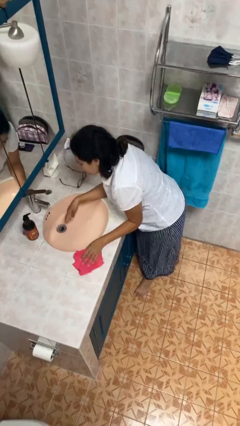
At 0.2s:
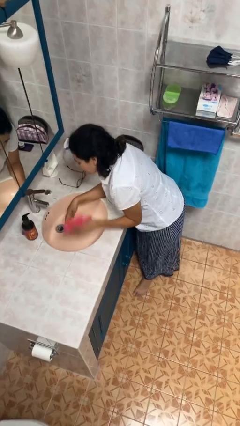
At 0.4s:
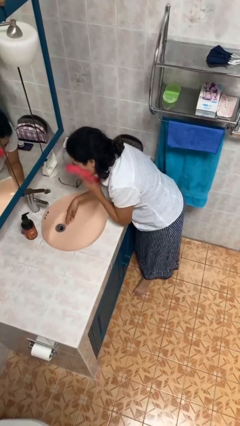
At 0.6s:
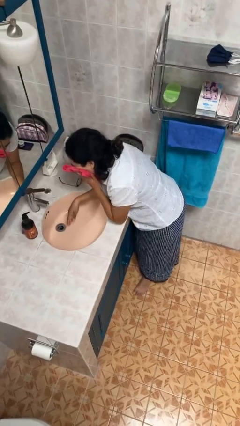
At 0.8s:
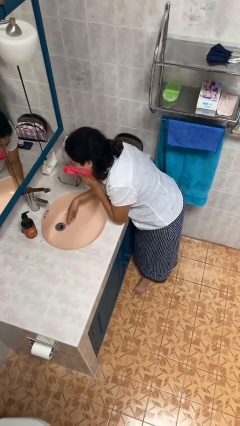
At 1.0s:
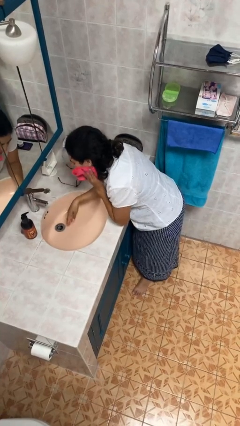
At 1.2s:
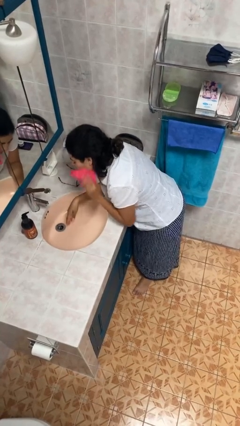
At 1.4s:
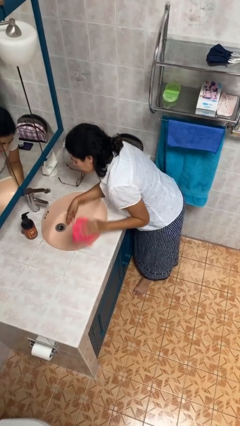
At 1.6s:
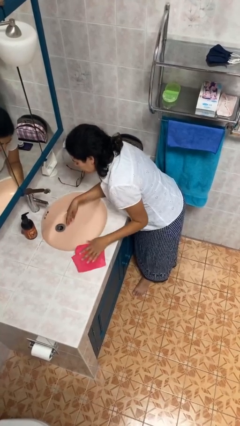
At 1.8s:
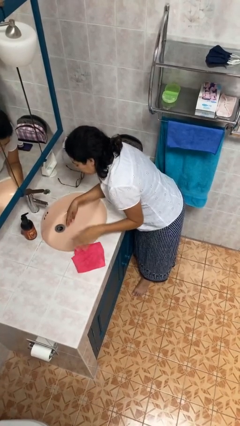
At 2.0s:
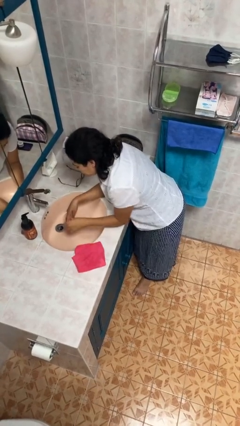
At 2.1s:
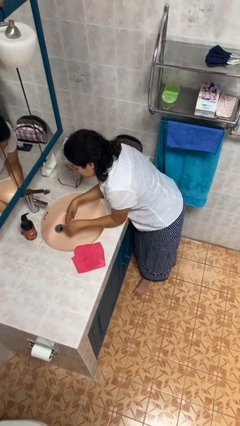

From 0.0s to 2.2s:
person dries face with towel

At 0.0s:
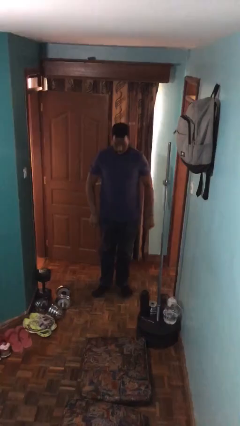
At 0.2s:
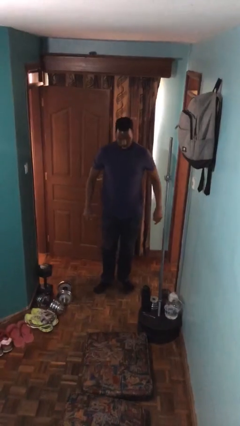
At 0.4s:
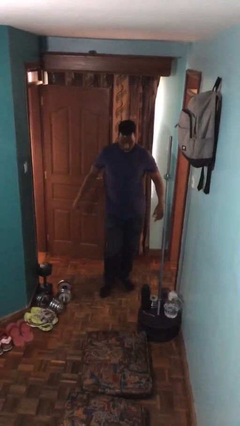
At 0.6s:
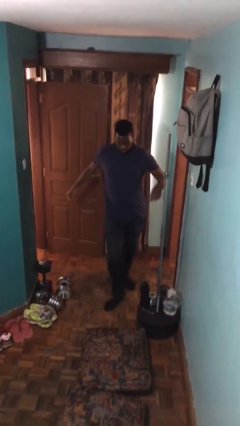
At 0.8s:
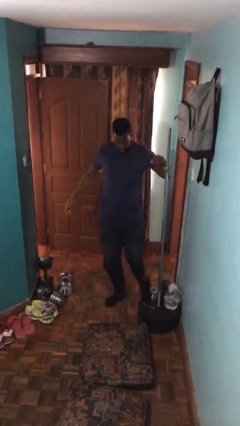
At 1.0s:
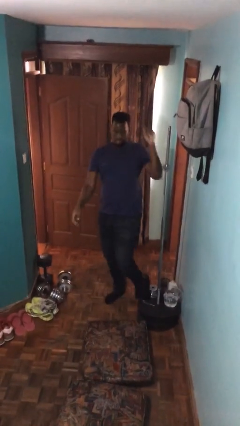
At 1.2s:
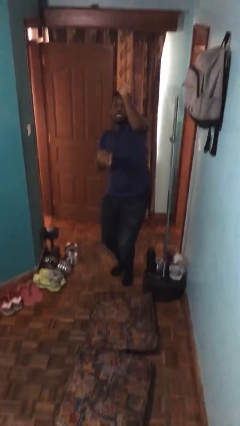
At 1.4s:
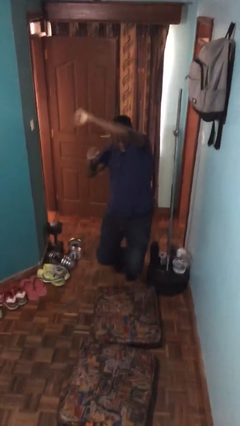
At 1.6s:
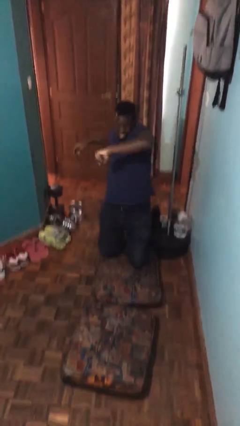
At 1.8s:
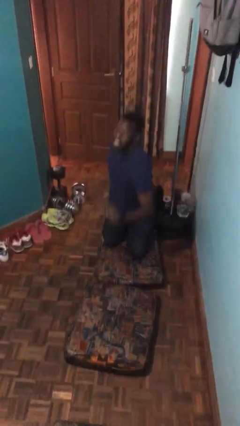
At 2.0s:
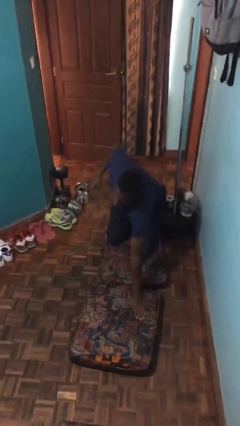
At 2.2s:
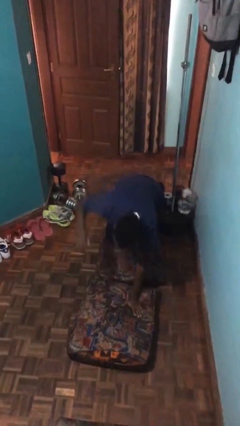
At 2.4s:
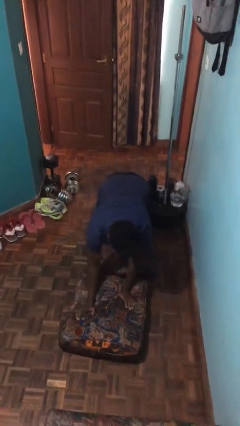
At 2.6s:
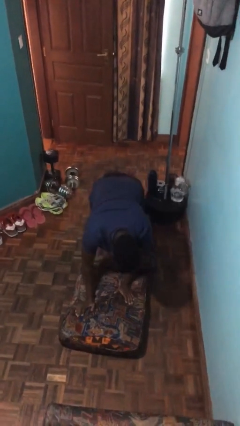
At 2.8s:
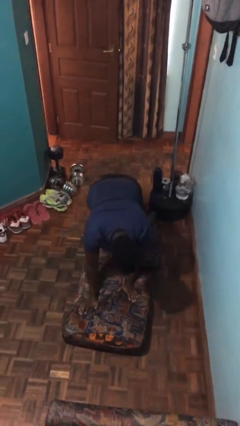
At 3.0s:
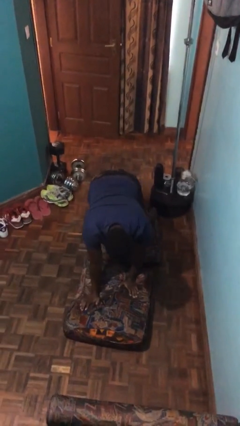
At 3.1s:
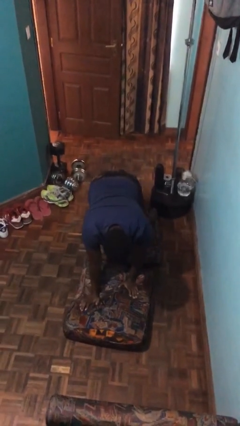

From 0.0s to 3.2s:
person trips on object on floor

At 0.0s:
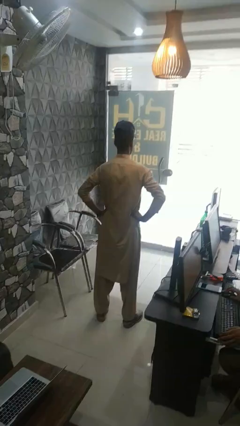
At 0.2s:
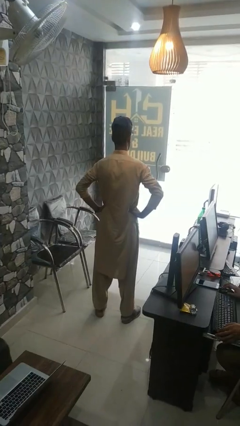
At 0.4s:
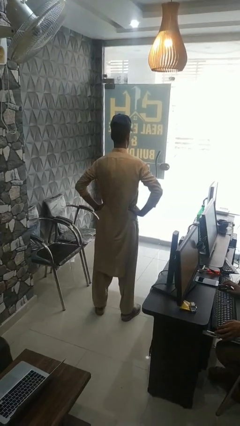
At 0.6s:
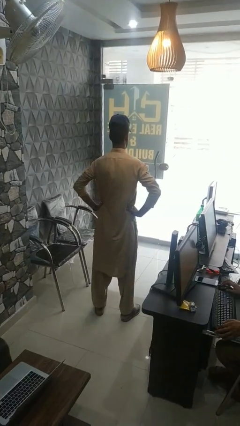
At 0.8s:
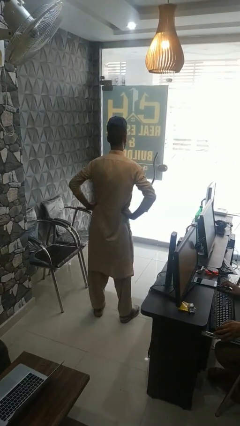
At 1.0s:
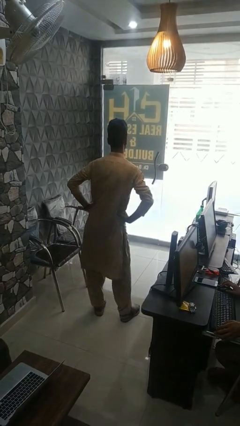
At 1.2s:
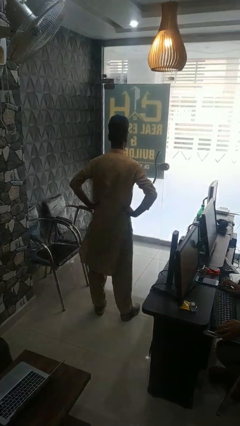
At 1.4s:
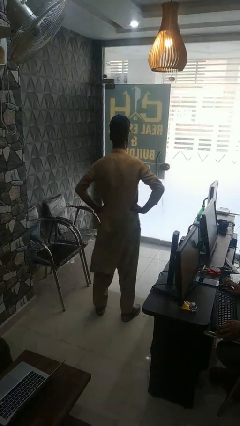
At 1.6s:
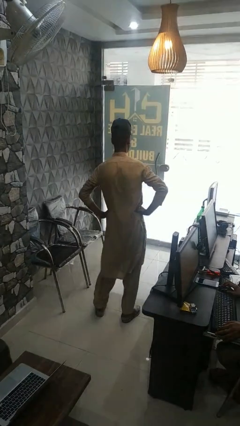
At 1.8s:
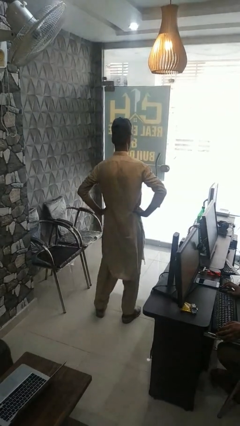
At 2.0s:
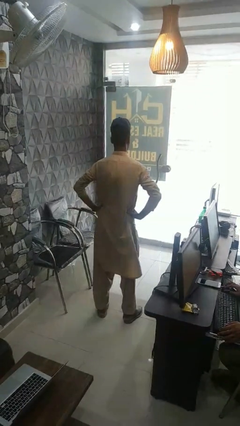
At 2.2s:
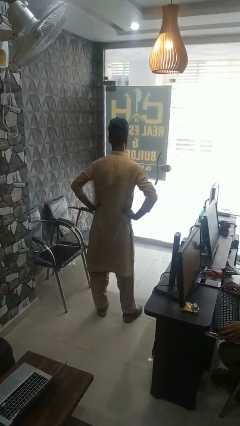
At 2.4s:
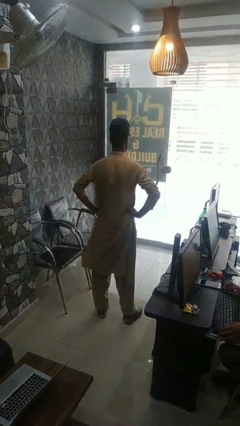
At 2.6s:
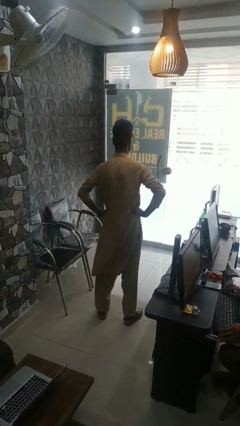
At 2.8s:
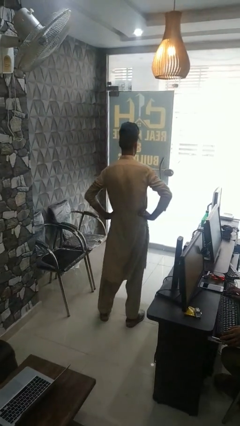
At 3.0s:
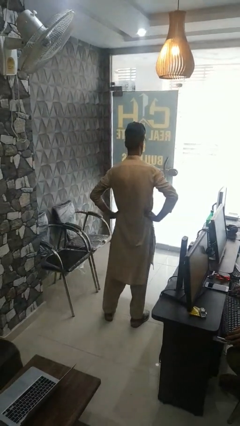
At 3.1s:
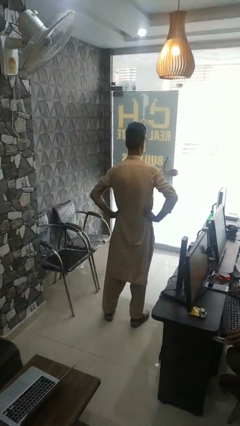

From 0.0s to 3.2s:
person wiggles hips

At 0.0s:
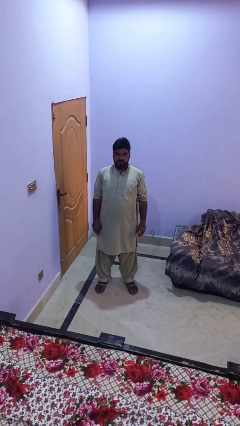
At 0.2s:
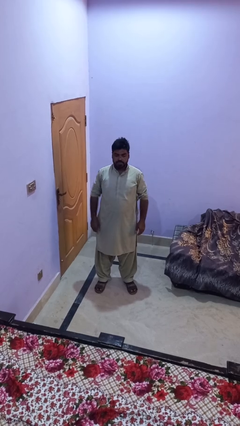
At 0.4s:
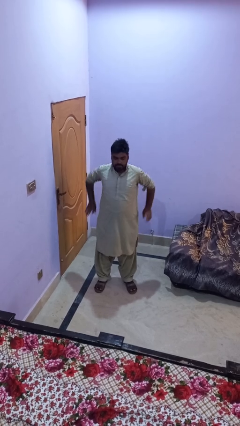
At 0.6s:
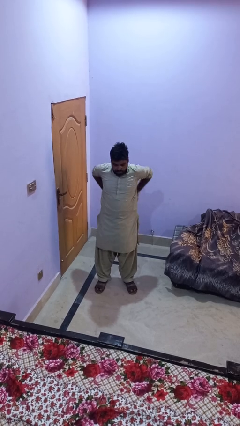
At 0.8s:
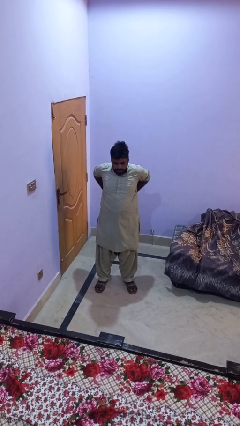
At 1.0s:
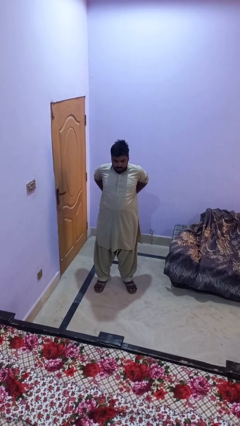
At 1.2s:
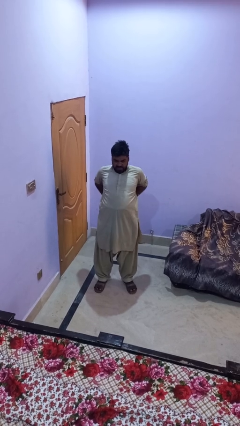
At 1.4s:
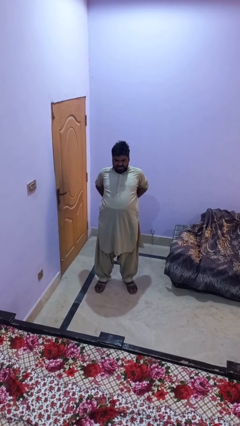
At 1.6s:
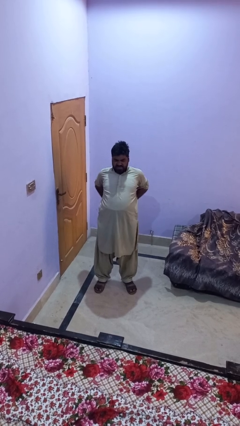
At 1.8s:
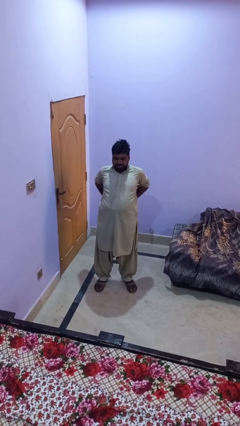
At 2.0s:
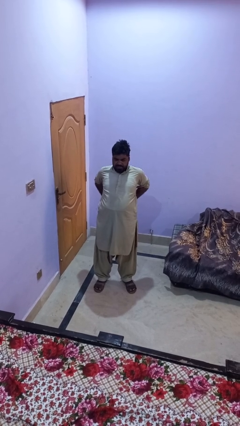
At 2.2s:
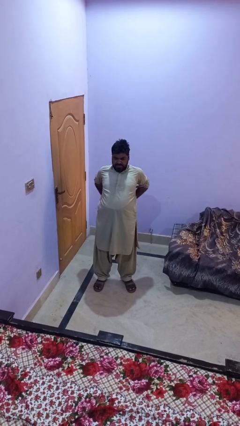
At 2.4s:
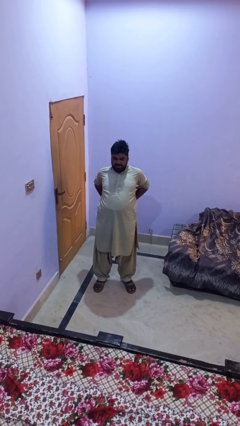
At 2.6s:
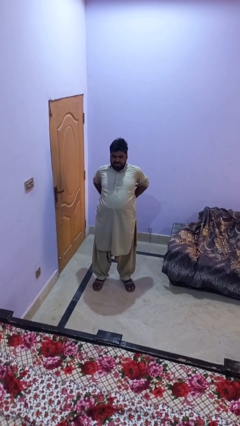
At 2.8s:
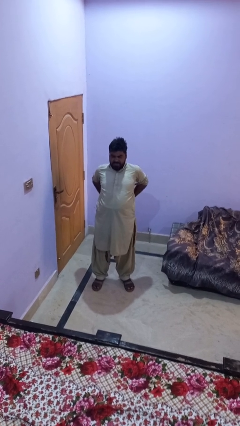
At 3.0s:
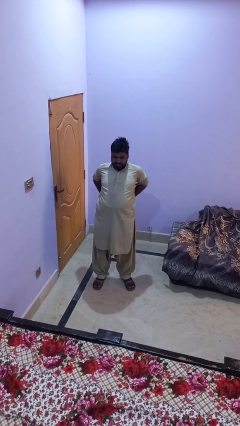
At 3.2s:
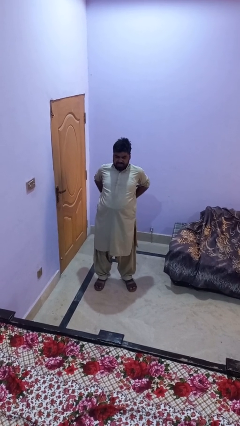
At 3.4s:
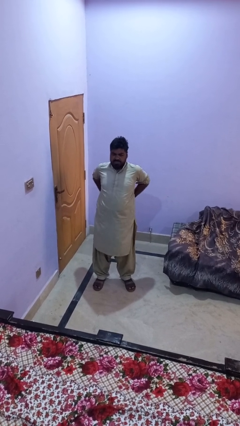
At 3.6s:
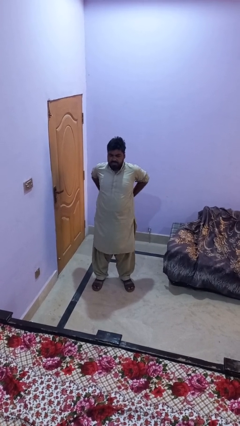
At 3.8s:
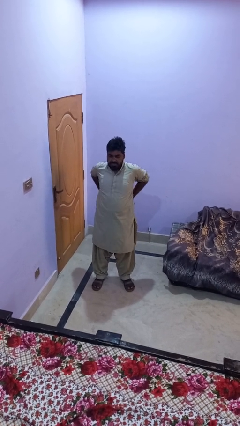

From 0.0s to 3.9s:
person stretches back

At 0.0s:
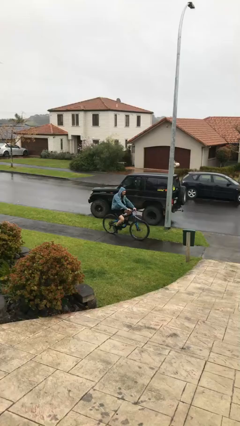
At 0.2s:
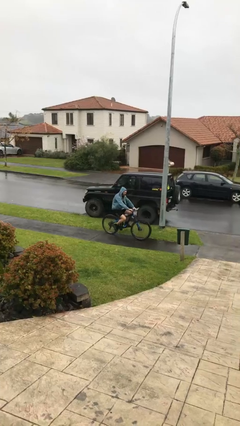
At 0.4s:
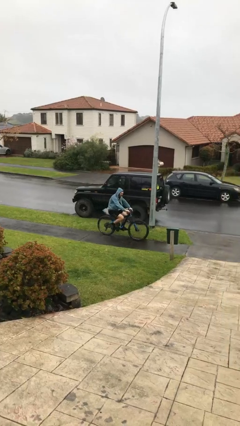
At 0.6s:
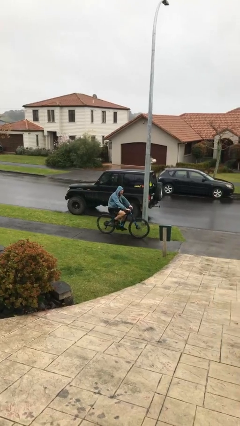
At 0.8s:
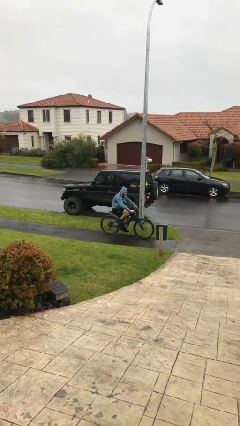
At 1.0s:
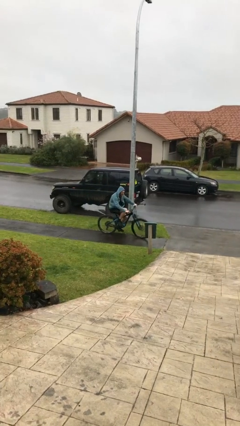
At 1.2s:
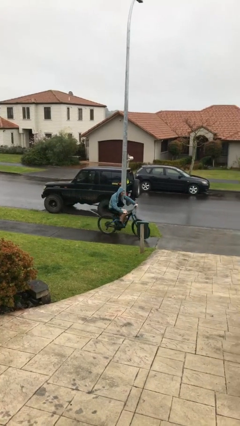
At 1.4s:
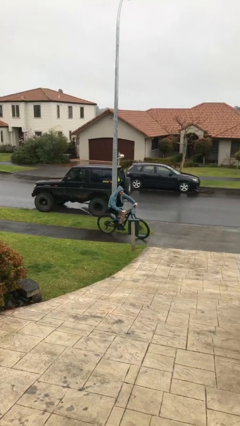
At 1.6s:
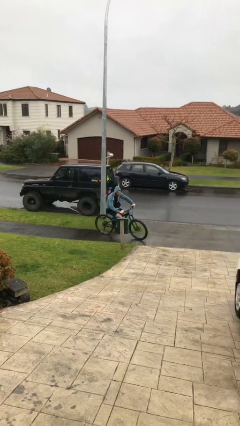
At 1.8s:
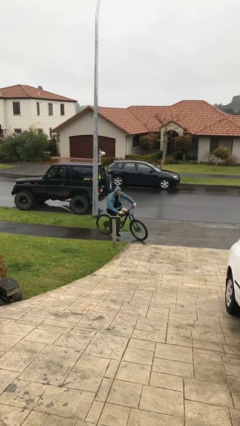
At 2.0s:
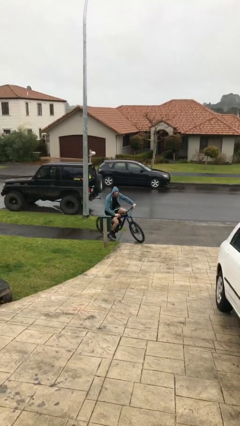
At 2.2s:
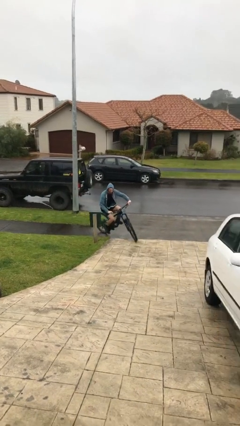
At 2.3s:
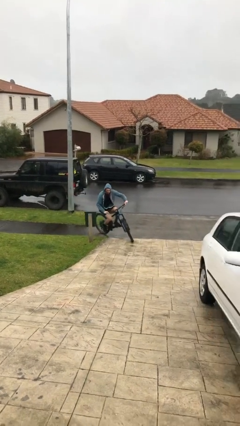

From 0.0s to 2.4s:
person rides bicycle

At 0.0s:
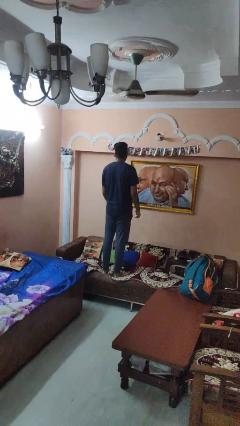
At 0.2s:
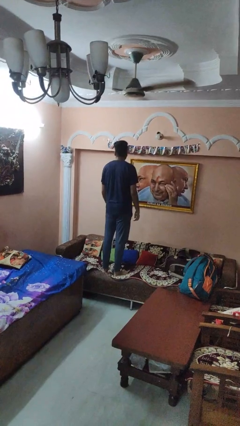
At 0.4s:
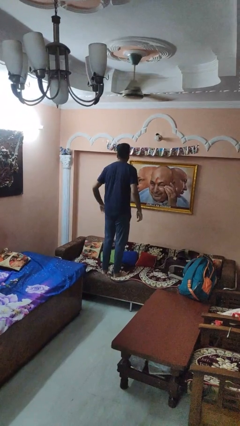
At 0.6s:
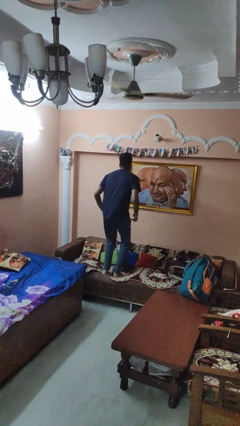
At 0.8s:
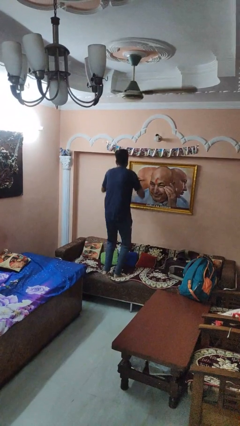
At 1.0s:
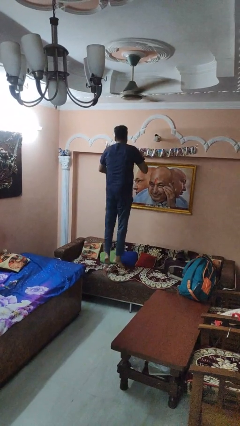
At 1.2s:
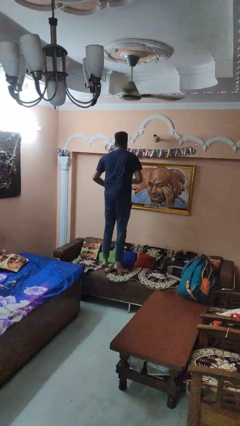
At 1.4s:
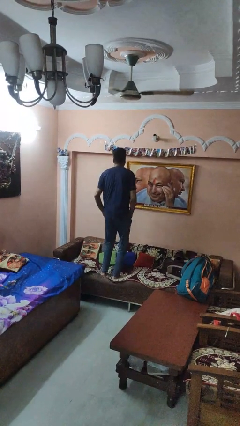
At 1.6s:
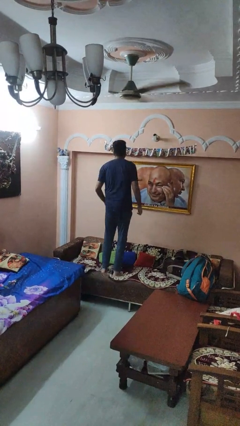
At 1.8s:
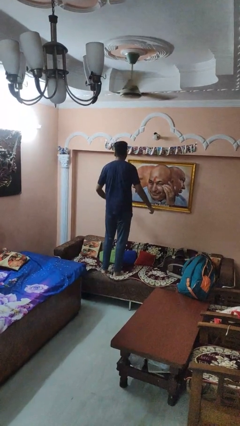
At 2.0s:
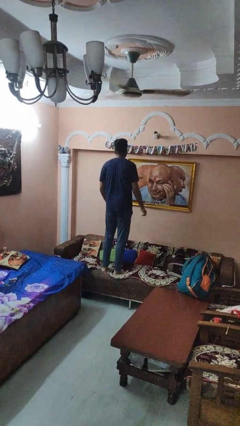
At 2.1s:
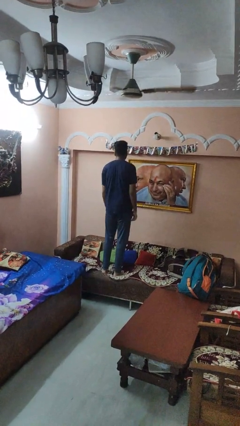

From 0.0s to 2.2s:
person jumps on couch

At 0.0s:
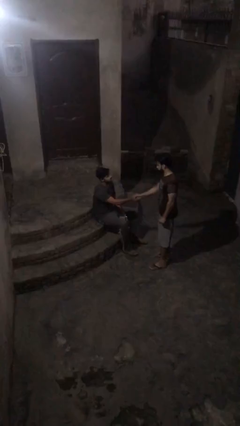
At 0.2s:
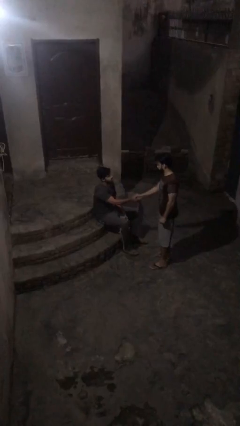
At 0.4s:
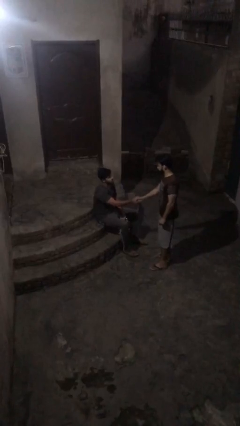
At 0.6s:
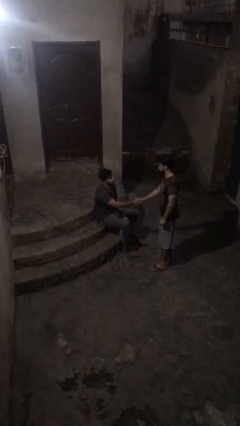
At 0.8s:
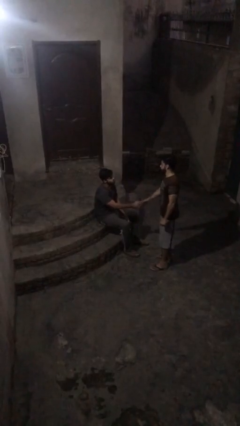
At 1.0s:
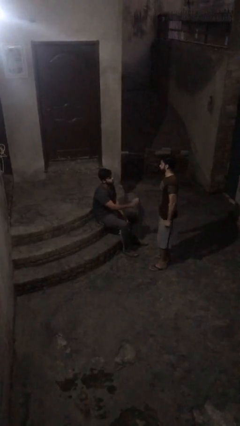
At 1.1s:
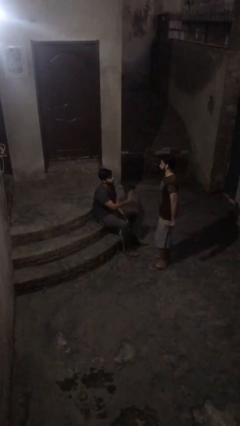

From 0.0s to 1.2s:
person shakes hand
